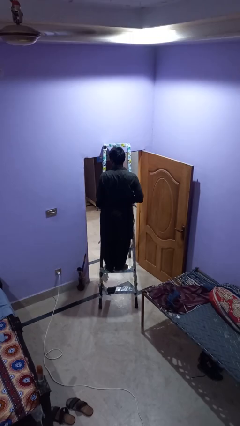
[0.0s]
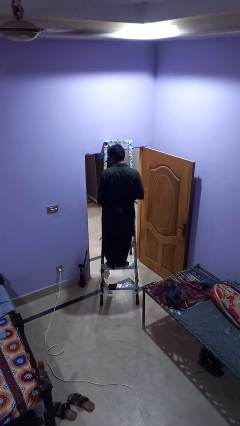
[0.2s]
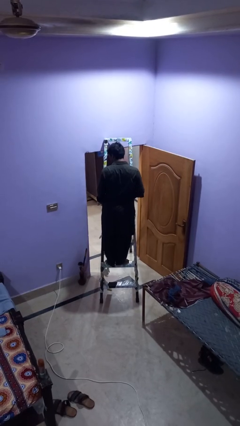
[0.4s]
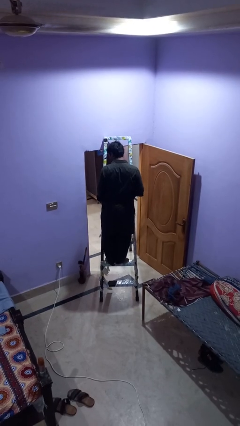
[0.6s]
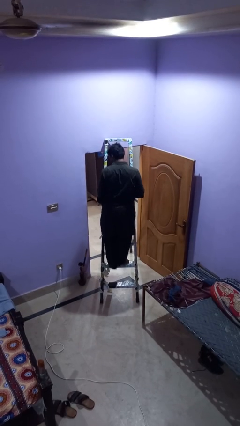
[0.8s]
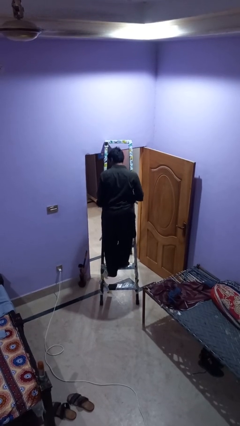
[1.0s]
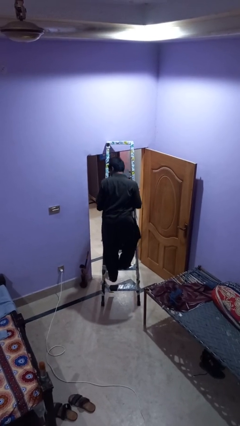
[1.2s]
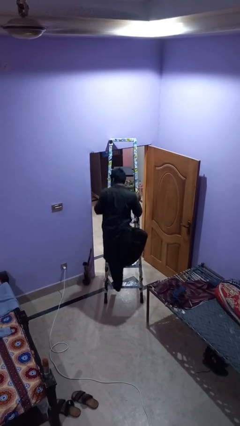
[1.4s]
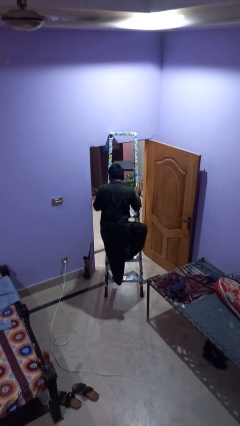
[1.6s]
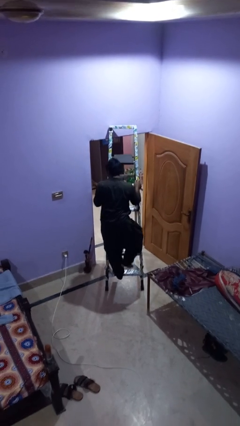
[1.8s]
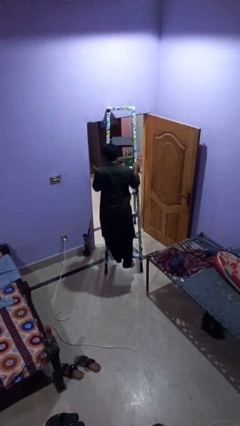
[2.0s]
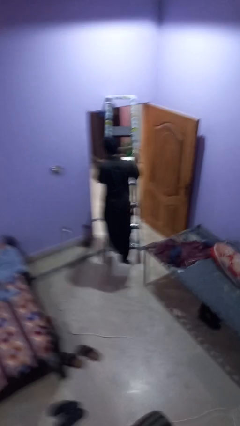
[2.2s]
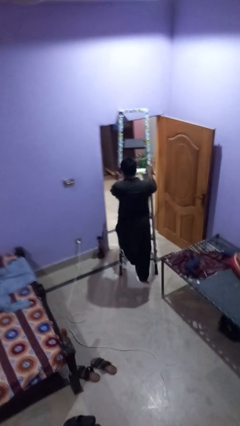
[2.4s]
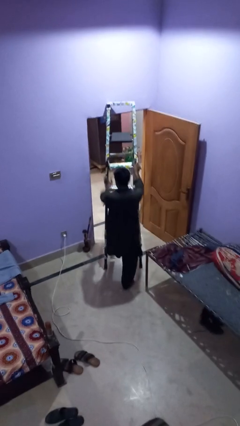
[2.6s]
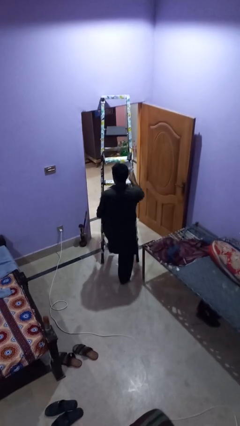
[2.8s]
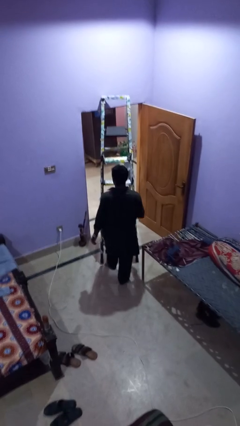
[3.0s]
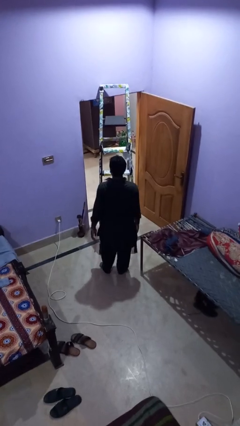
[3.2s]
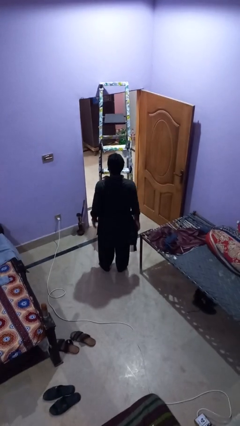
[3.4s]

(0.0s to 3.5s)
person climbs down ladder

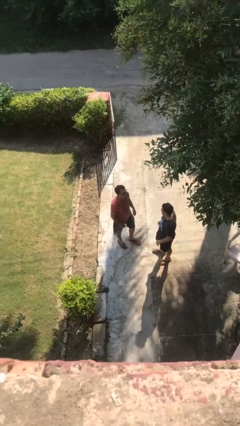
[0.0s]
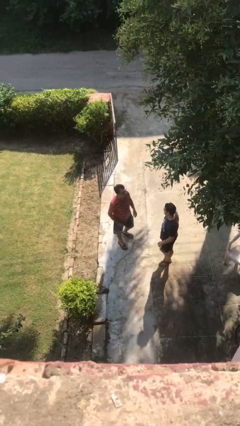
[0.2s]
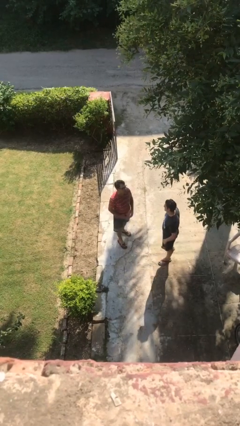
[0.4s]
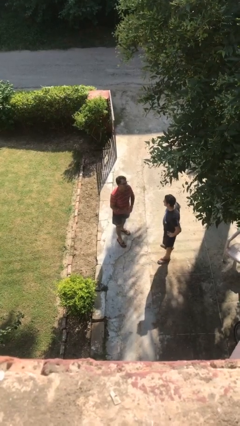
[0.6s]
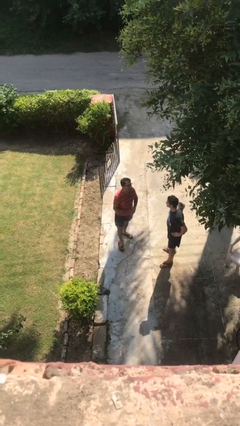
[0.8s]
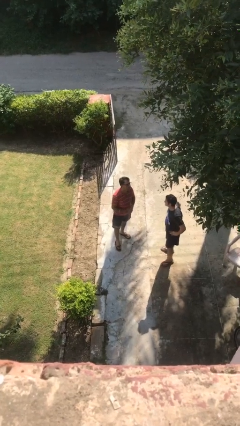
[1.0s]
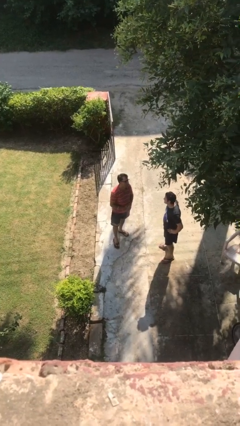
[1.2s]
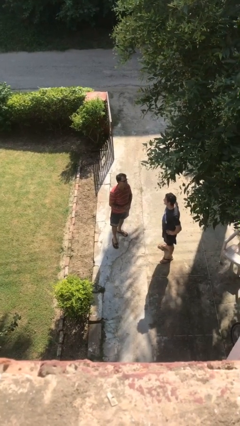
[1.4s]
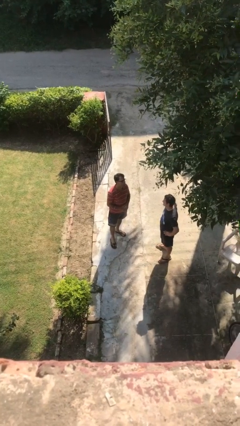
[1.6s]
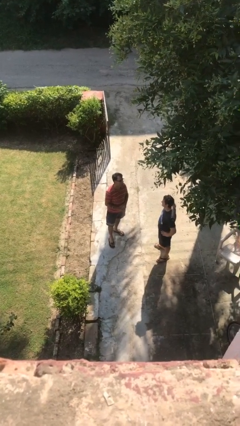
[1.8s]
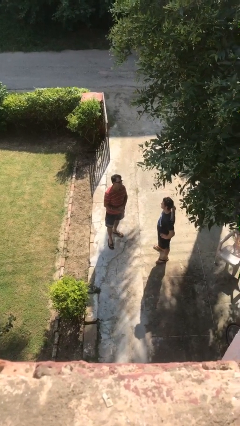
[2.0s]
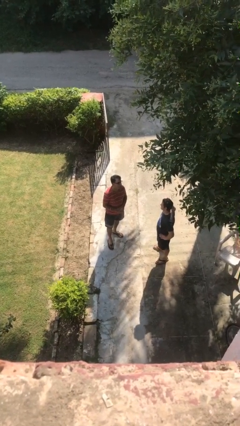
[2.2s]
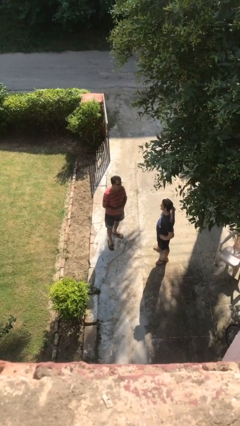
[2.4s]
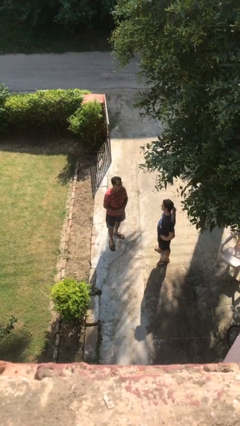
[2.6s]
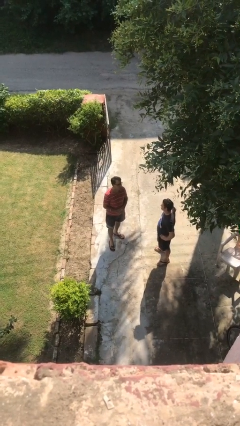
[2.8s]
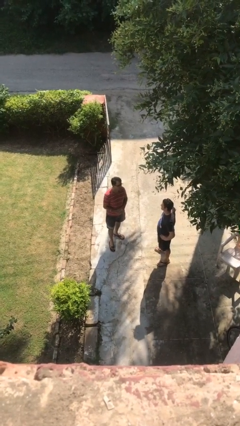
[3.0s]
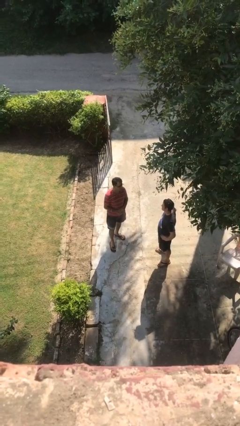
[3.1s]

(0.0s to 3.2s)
person talks to person

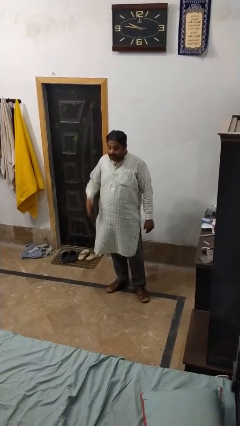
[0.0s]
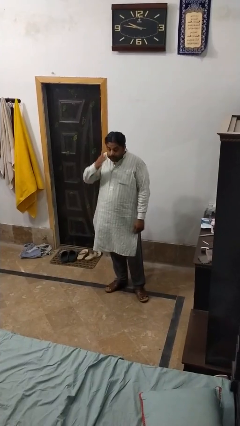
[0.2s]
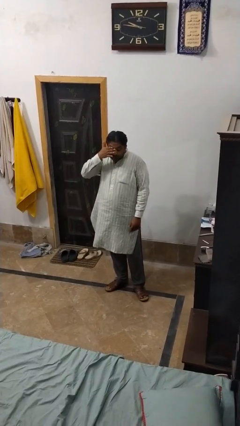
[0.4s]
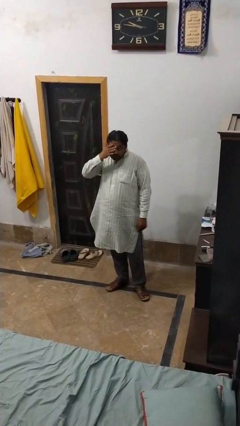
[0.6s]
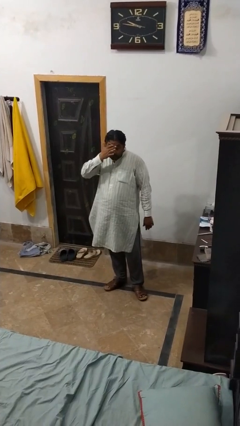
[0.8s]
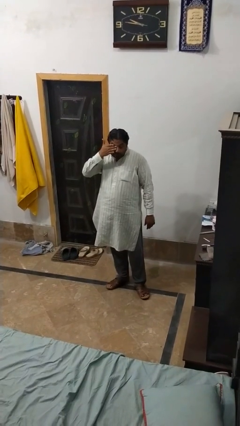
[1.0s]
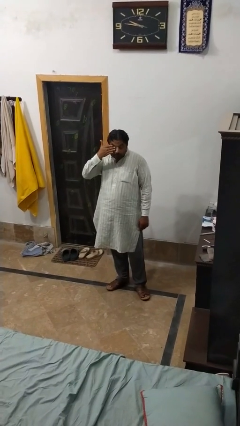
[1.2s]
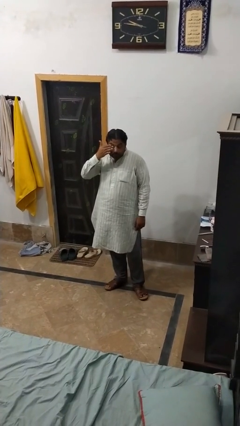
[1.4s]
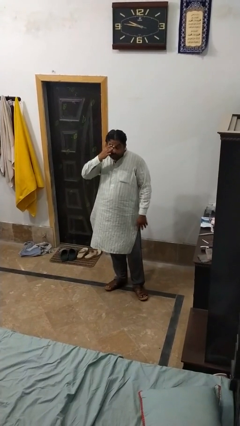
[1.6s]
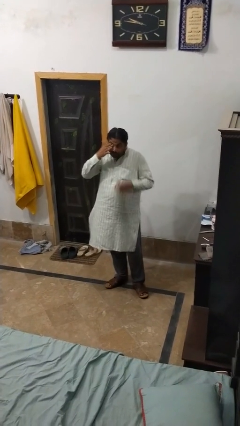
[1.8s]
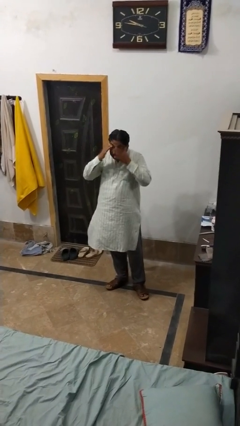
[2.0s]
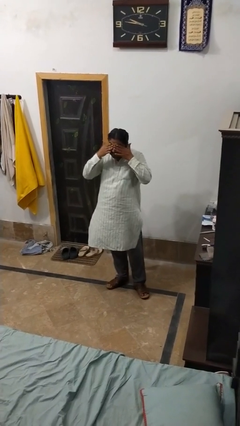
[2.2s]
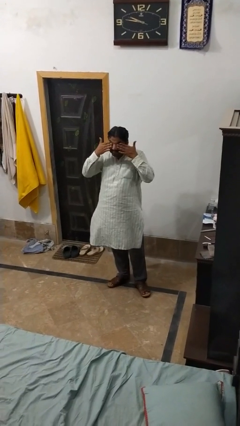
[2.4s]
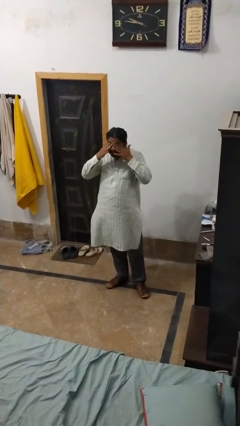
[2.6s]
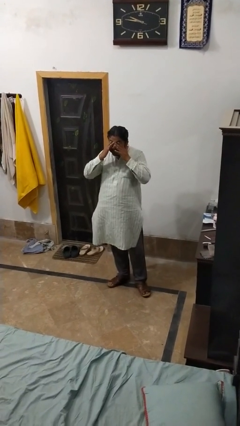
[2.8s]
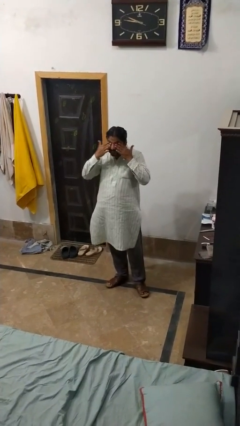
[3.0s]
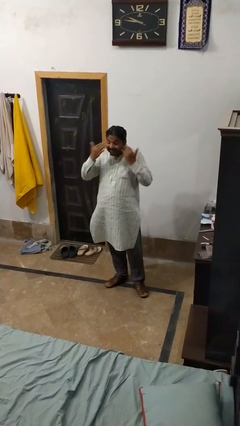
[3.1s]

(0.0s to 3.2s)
person rubs eyes

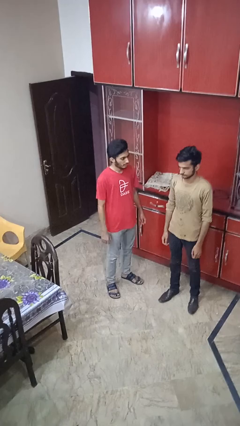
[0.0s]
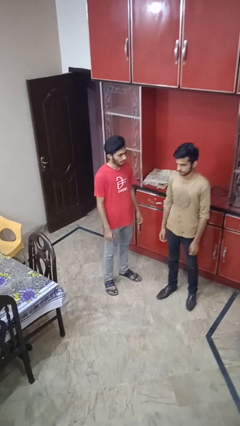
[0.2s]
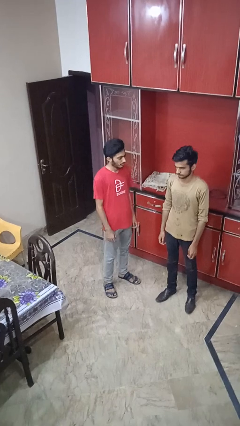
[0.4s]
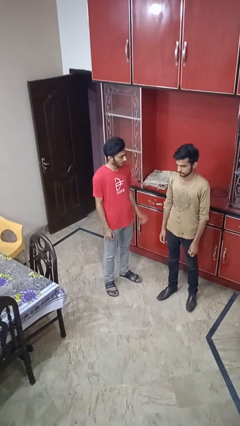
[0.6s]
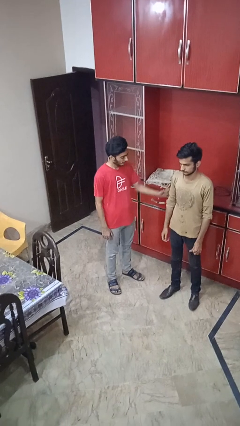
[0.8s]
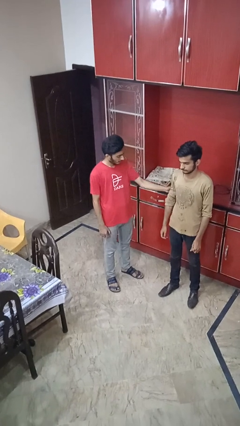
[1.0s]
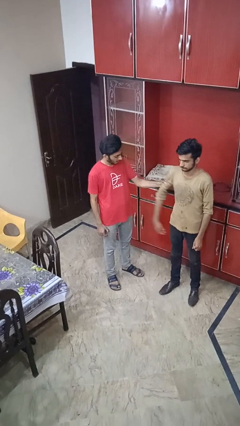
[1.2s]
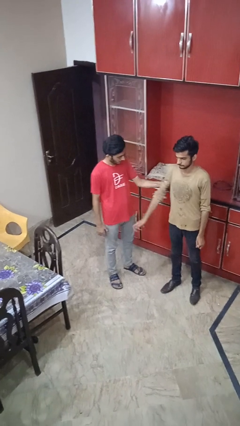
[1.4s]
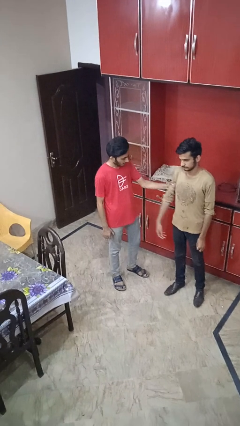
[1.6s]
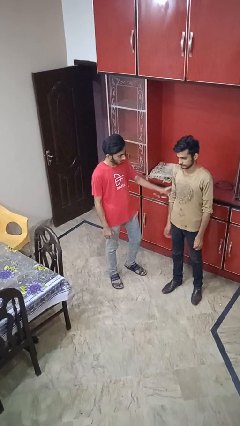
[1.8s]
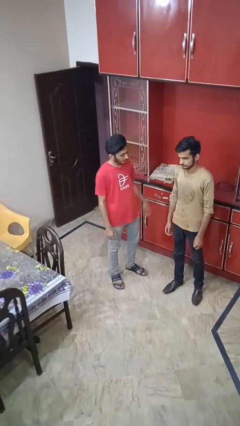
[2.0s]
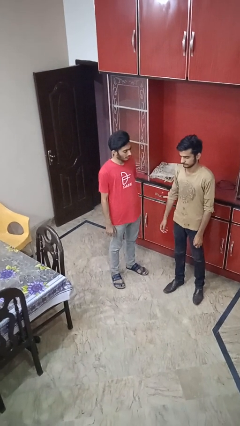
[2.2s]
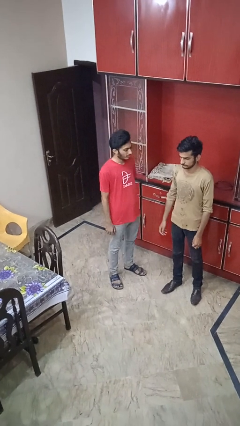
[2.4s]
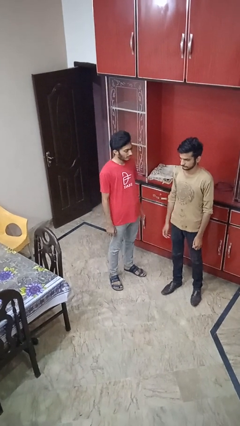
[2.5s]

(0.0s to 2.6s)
person grabs person by bicep

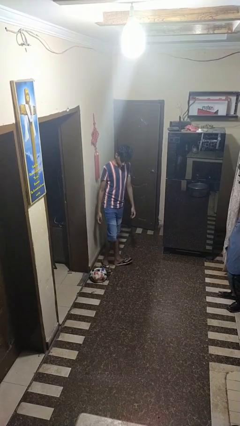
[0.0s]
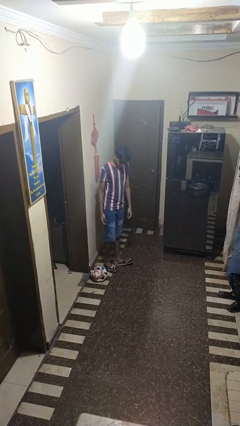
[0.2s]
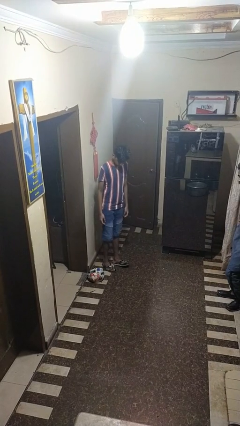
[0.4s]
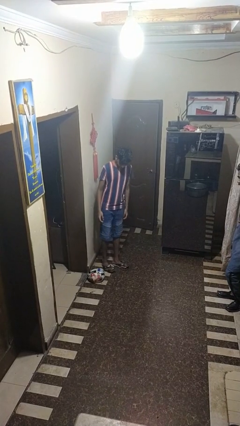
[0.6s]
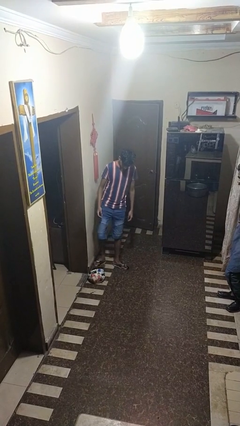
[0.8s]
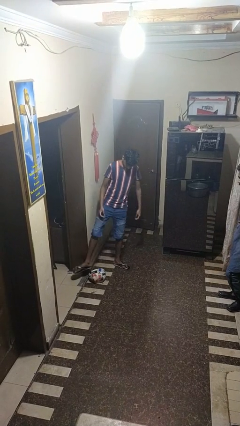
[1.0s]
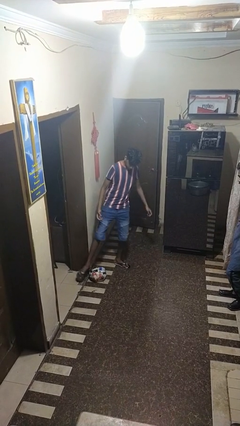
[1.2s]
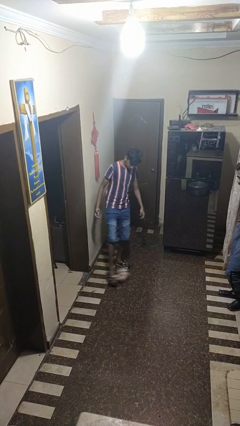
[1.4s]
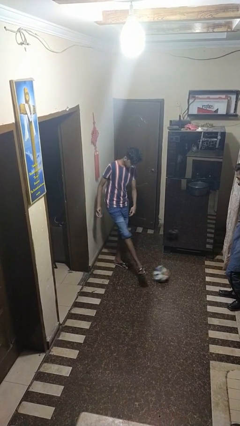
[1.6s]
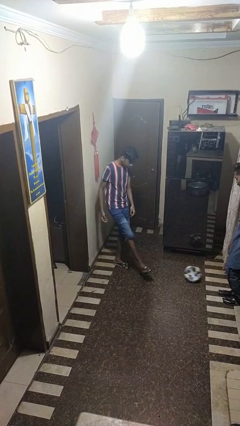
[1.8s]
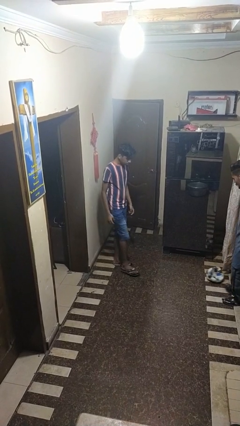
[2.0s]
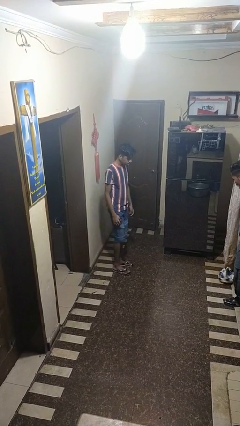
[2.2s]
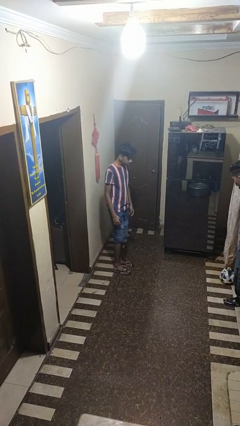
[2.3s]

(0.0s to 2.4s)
person kicks object to person

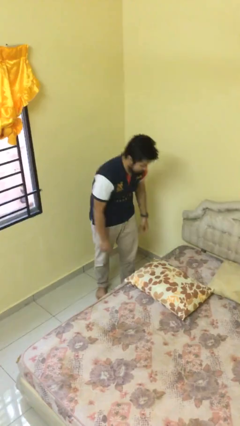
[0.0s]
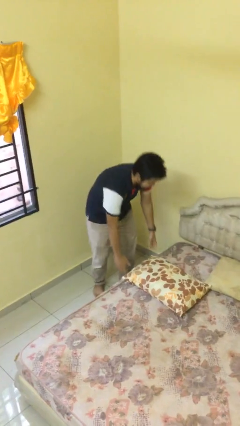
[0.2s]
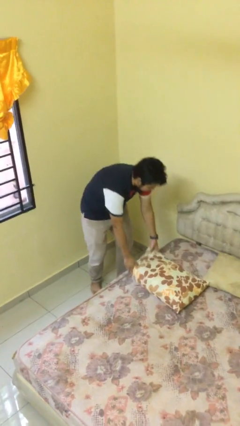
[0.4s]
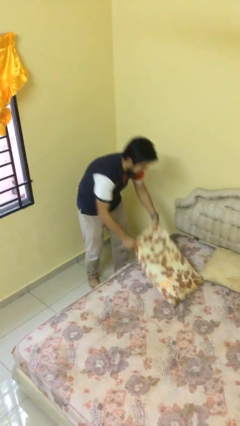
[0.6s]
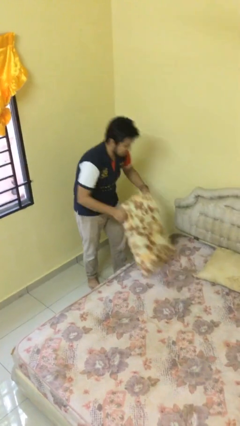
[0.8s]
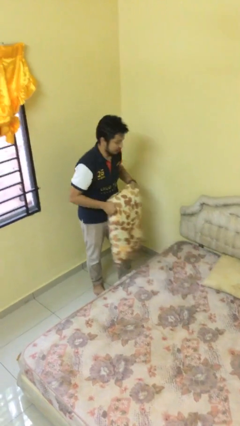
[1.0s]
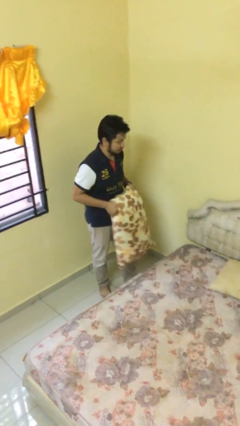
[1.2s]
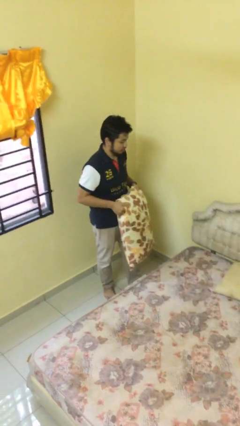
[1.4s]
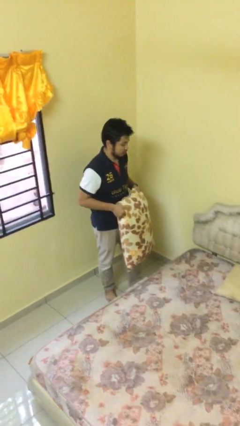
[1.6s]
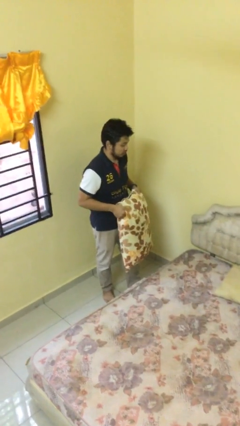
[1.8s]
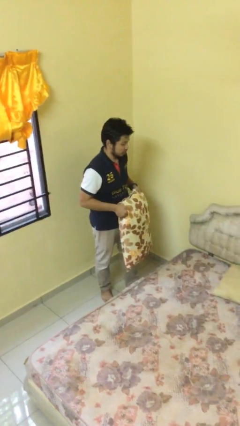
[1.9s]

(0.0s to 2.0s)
person picks up object from bed

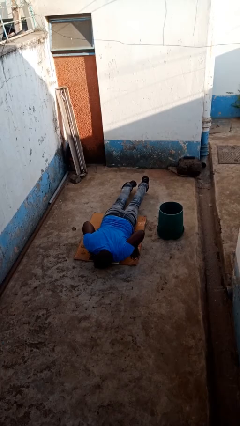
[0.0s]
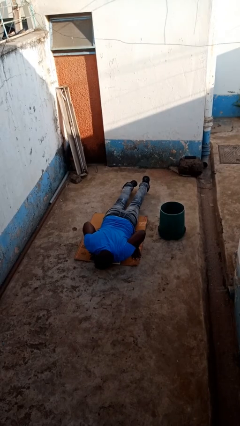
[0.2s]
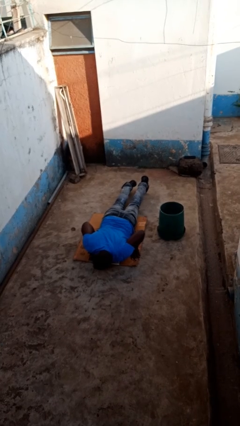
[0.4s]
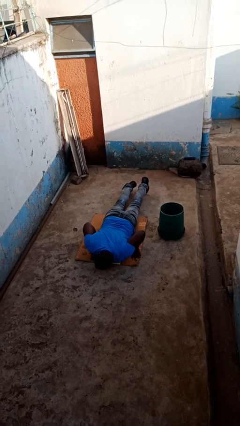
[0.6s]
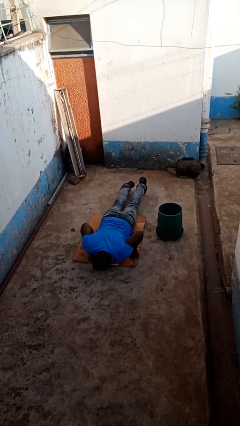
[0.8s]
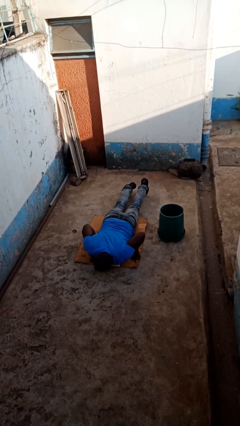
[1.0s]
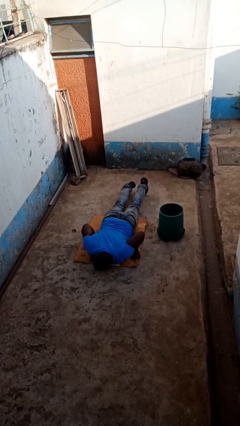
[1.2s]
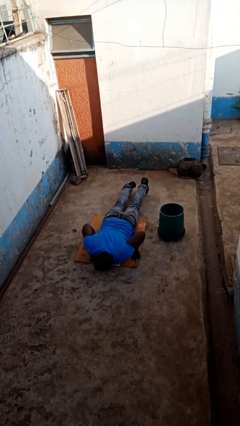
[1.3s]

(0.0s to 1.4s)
person lies down on floor
